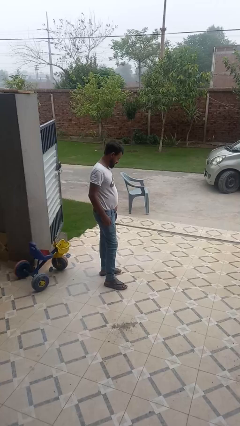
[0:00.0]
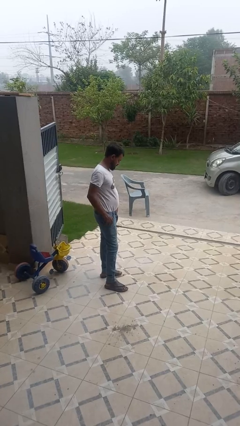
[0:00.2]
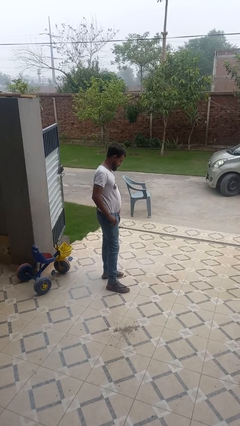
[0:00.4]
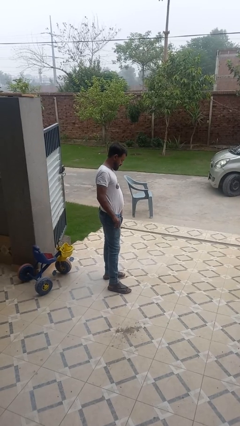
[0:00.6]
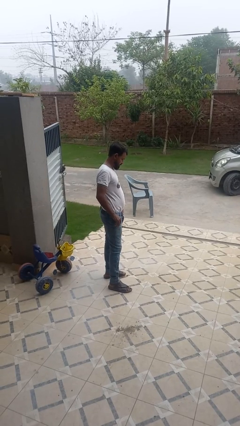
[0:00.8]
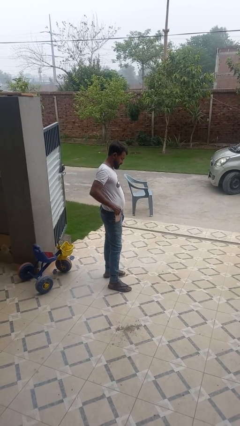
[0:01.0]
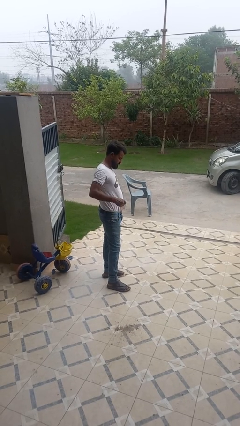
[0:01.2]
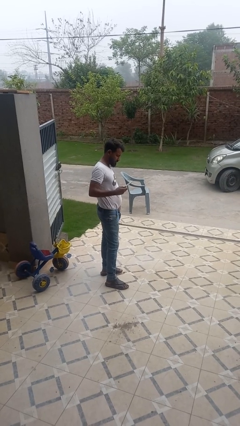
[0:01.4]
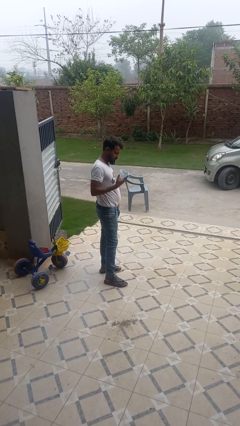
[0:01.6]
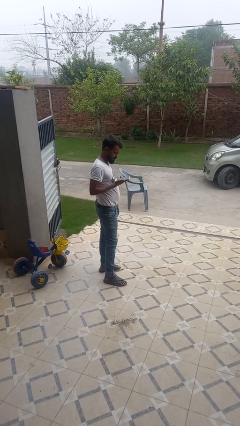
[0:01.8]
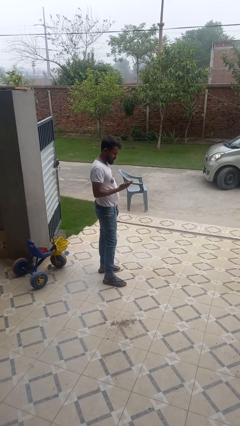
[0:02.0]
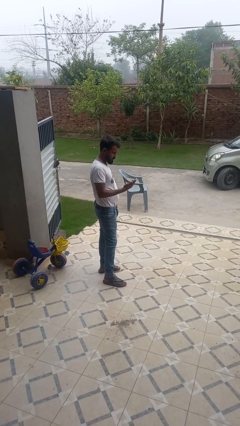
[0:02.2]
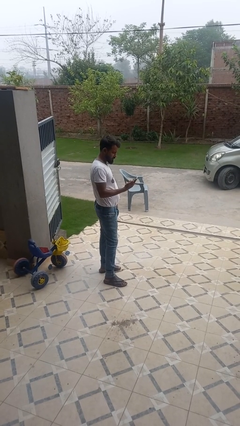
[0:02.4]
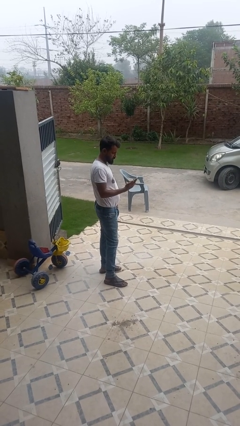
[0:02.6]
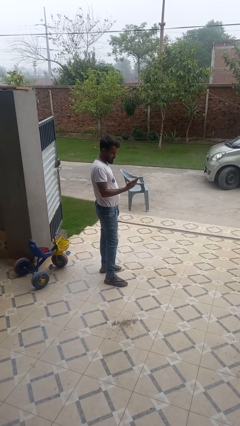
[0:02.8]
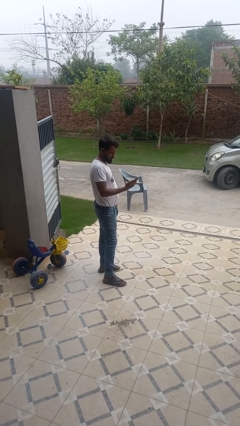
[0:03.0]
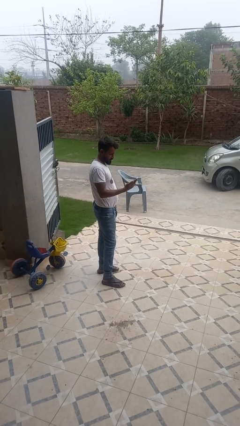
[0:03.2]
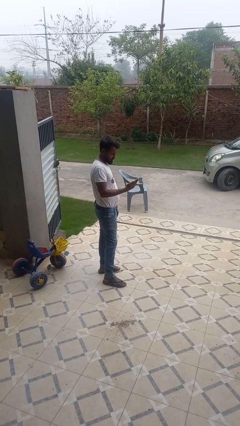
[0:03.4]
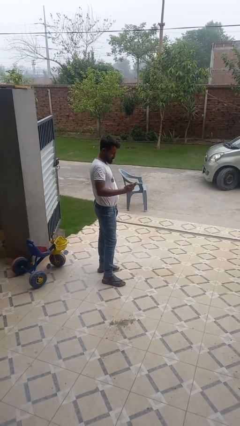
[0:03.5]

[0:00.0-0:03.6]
person takes phone from pocket

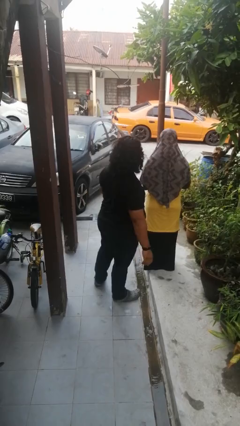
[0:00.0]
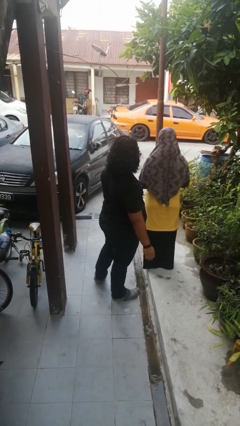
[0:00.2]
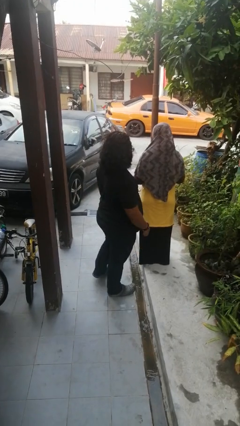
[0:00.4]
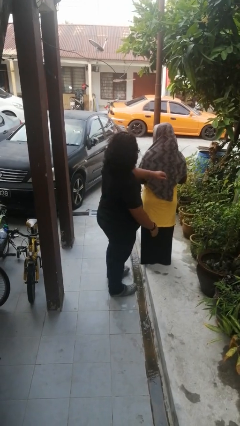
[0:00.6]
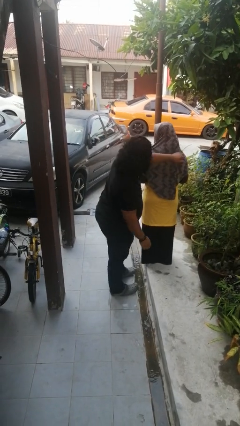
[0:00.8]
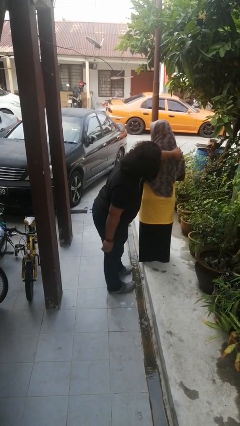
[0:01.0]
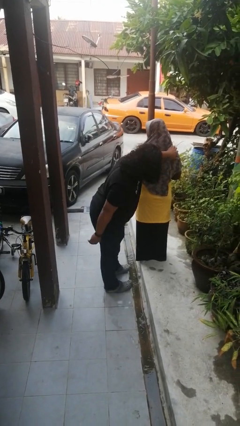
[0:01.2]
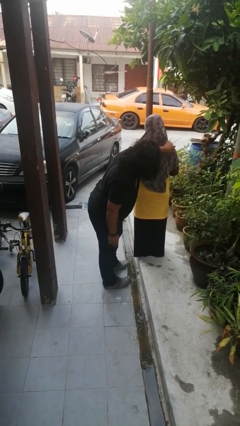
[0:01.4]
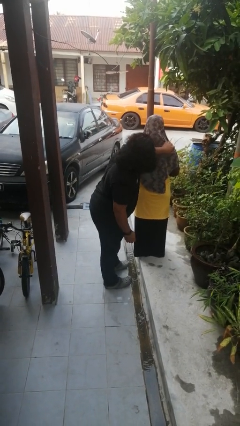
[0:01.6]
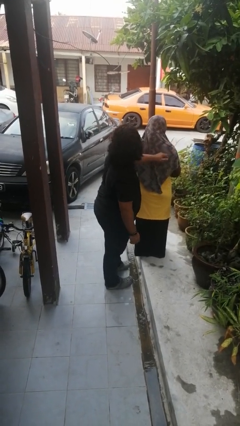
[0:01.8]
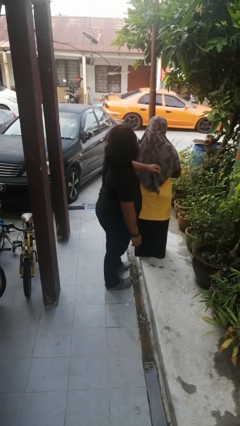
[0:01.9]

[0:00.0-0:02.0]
person touches back of person

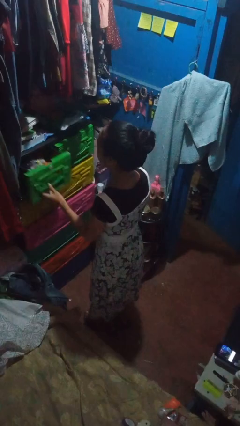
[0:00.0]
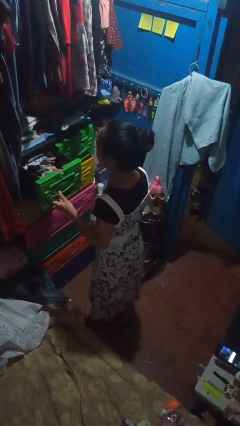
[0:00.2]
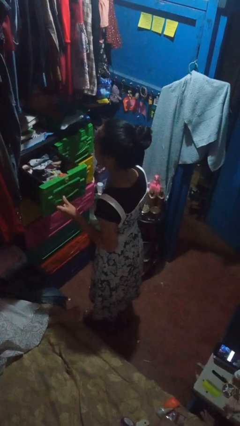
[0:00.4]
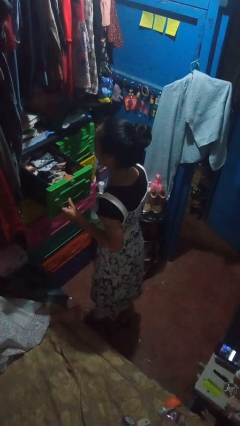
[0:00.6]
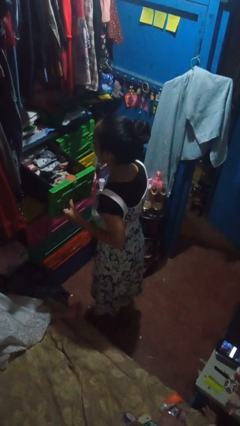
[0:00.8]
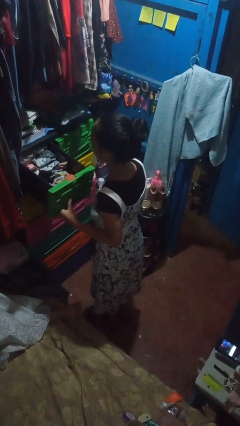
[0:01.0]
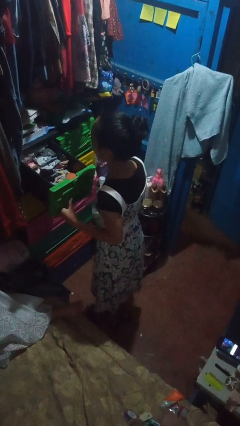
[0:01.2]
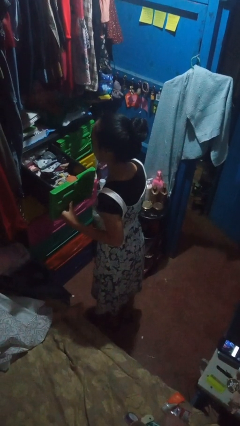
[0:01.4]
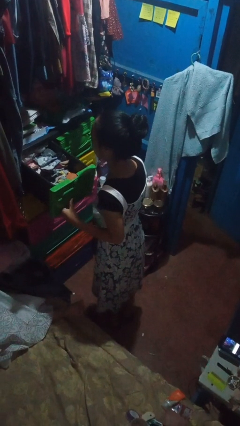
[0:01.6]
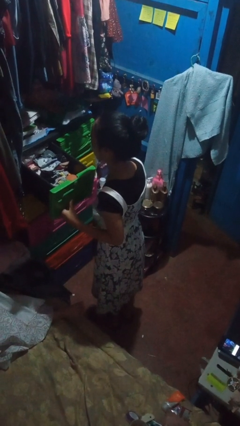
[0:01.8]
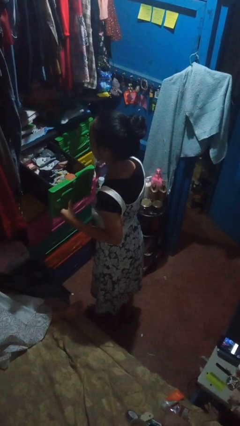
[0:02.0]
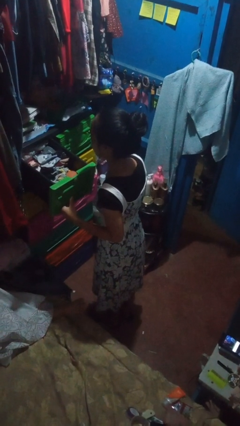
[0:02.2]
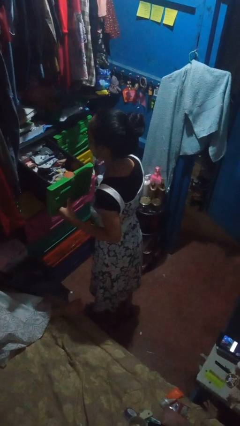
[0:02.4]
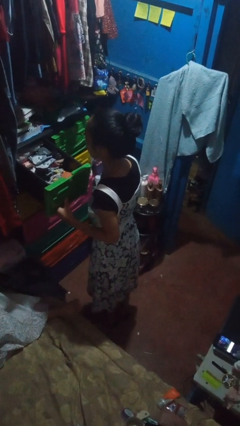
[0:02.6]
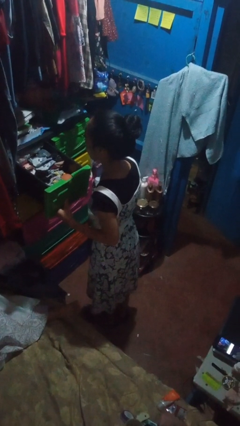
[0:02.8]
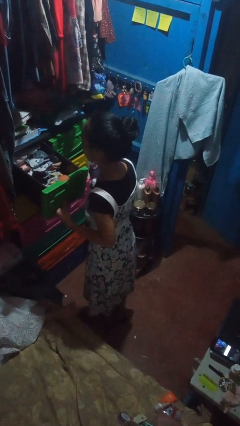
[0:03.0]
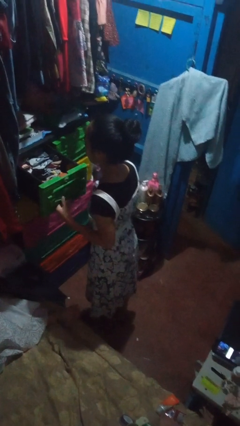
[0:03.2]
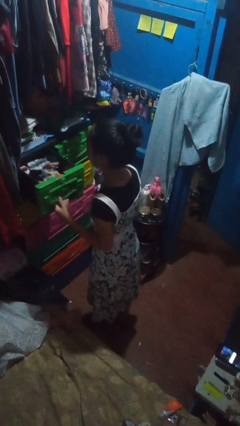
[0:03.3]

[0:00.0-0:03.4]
person opens dresser drawer

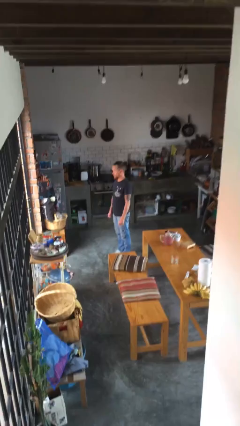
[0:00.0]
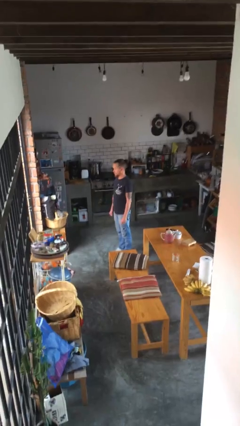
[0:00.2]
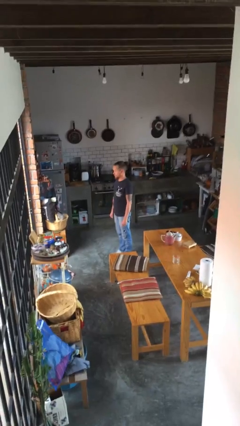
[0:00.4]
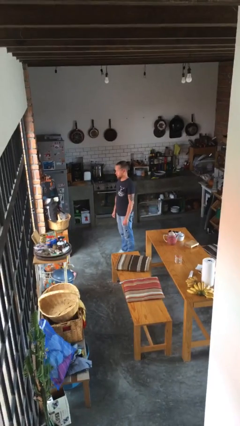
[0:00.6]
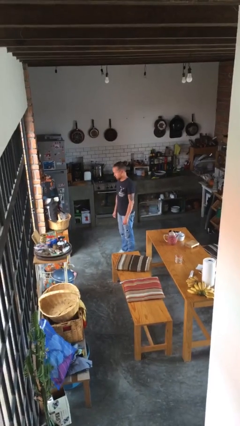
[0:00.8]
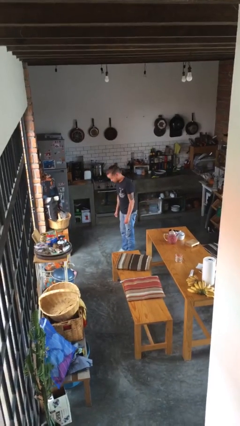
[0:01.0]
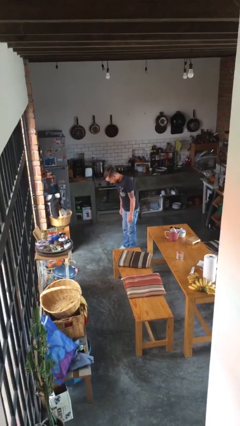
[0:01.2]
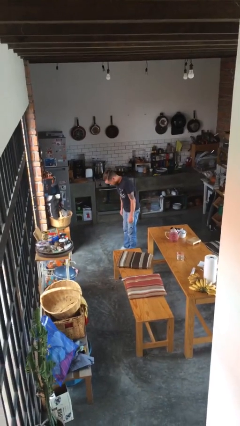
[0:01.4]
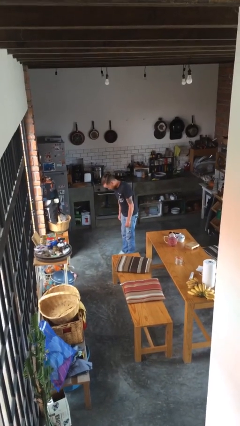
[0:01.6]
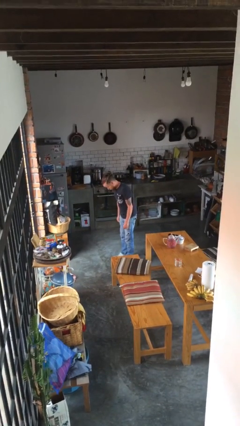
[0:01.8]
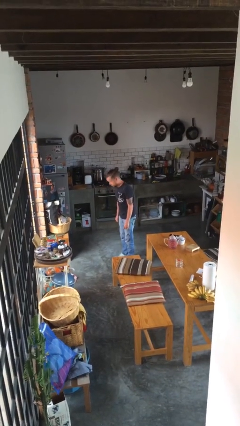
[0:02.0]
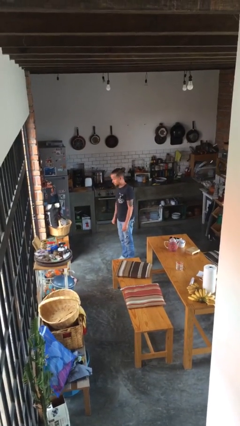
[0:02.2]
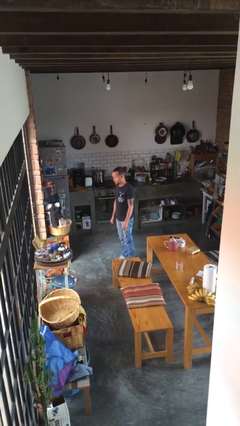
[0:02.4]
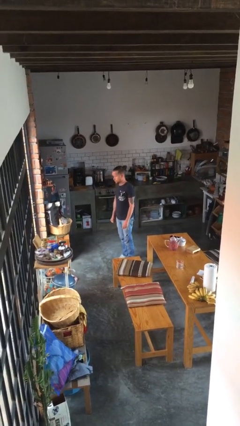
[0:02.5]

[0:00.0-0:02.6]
person bows

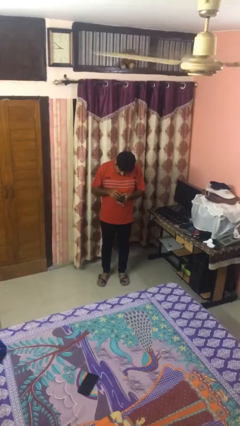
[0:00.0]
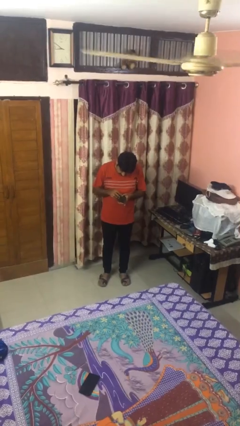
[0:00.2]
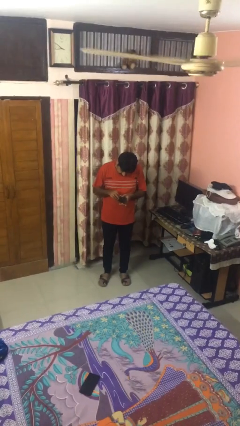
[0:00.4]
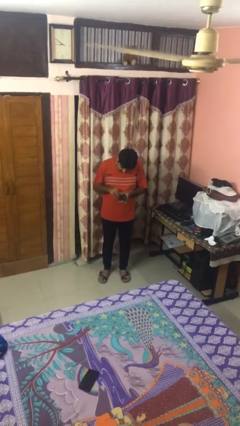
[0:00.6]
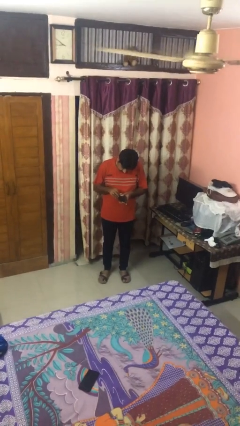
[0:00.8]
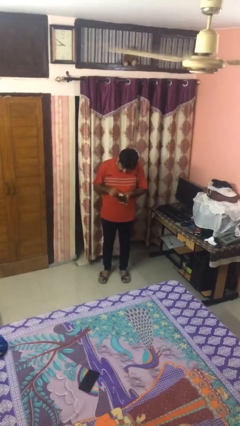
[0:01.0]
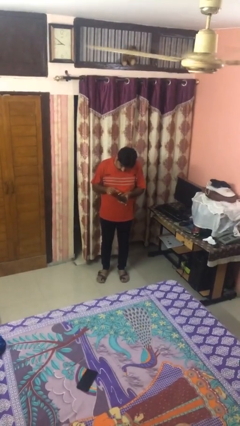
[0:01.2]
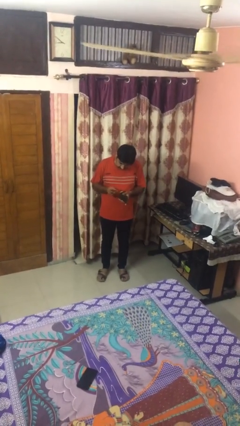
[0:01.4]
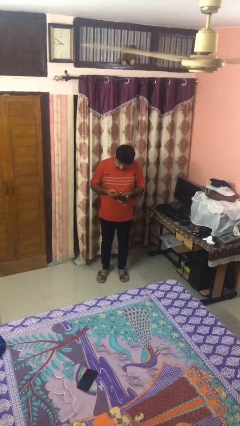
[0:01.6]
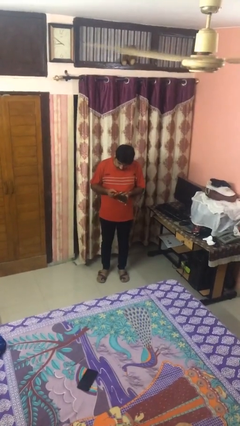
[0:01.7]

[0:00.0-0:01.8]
person takes object from purse

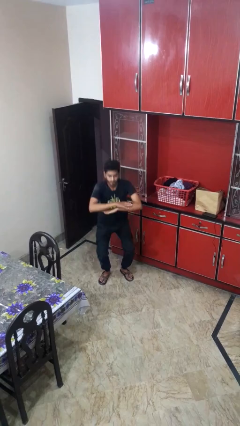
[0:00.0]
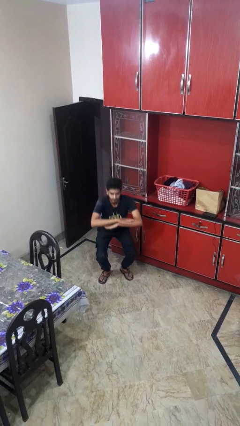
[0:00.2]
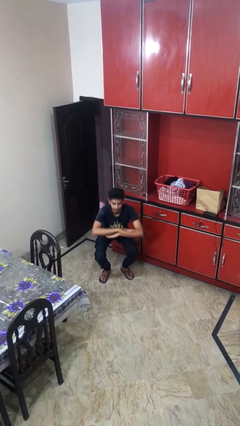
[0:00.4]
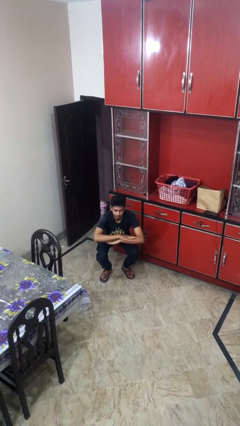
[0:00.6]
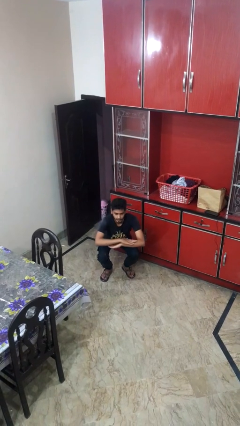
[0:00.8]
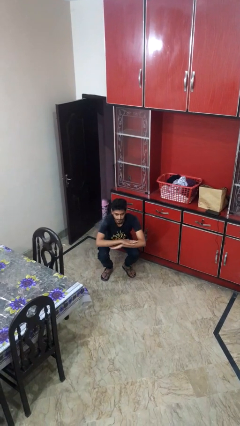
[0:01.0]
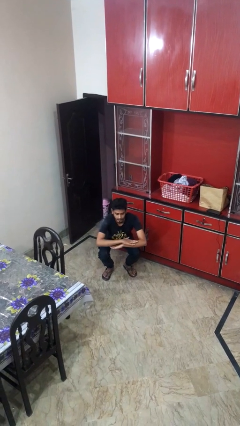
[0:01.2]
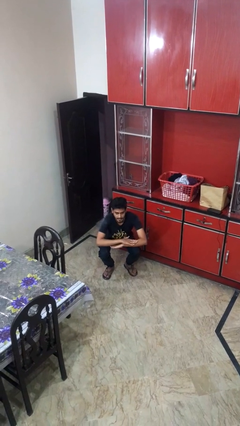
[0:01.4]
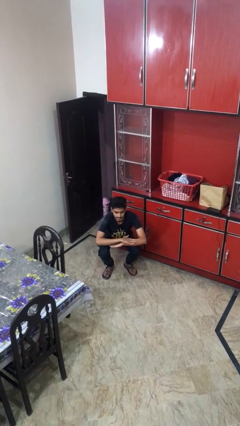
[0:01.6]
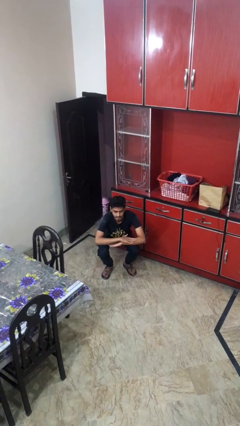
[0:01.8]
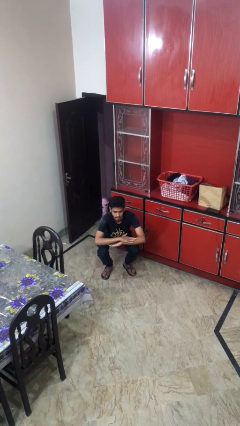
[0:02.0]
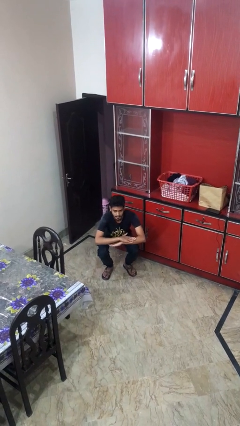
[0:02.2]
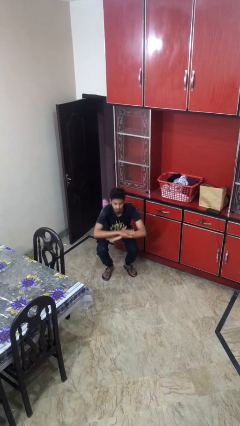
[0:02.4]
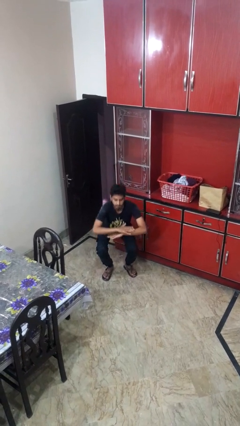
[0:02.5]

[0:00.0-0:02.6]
person squats

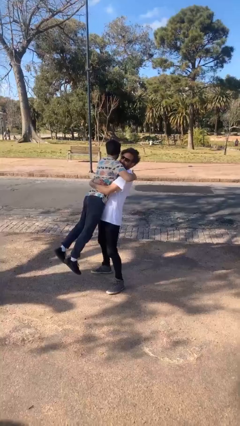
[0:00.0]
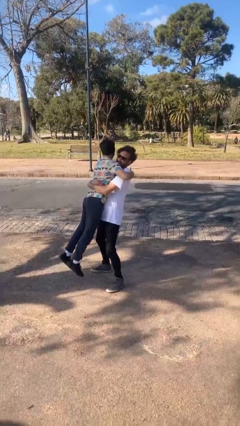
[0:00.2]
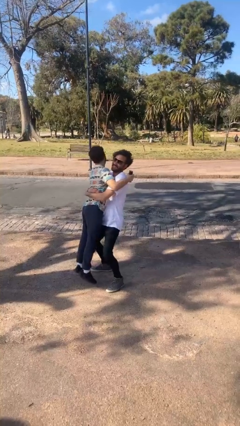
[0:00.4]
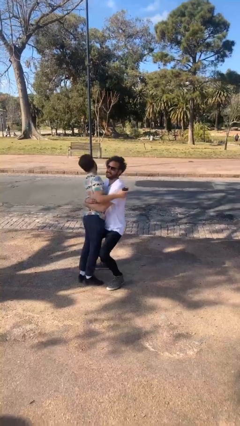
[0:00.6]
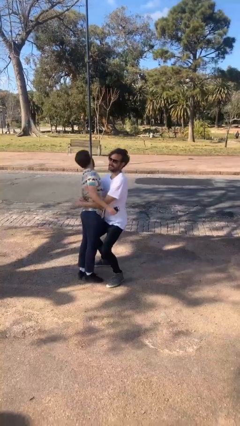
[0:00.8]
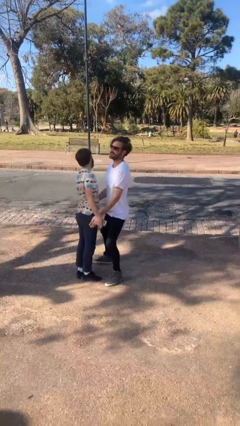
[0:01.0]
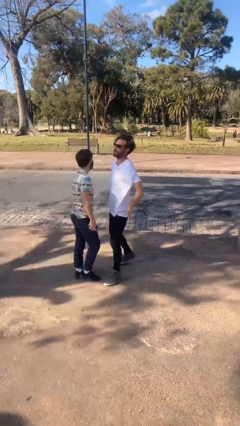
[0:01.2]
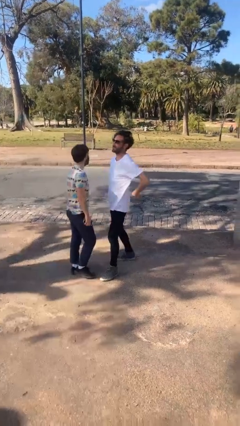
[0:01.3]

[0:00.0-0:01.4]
person puts down person
